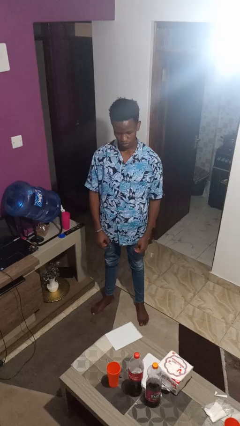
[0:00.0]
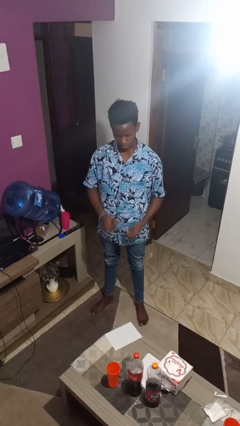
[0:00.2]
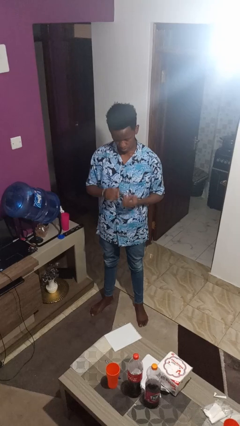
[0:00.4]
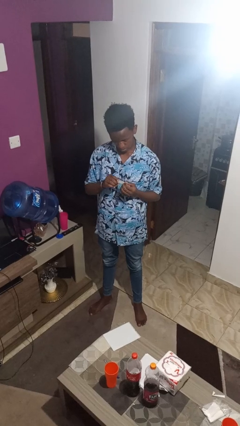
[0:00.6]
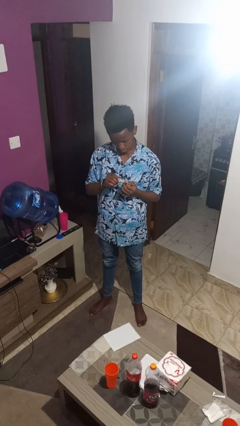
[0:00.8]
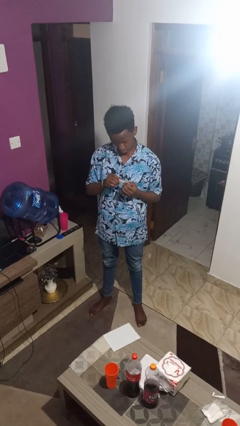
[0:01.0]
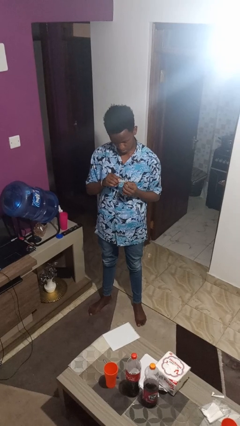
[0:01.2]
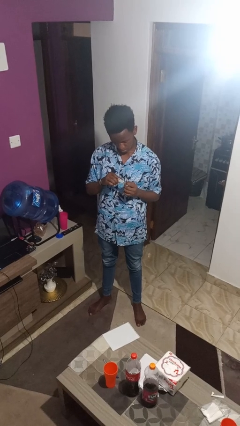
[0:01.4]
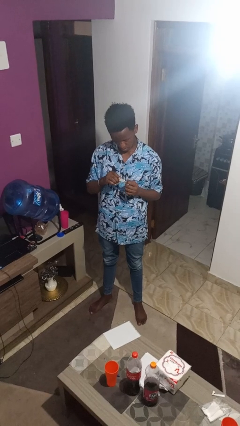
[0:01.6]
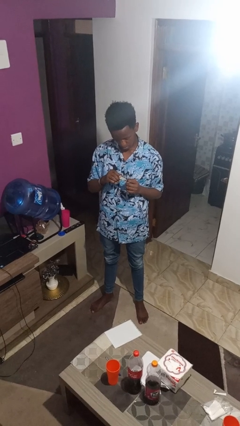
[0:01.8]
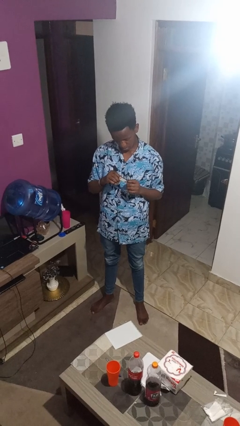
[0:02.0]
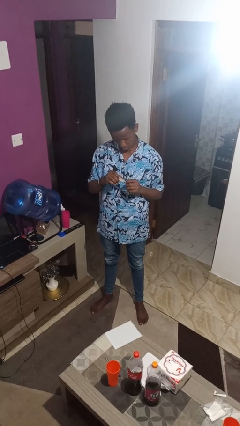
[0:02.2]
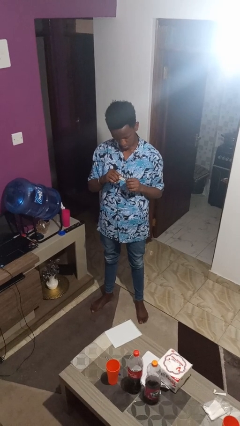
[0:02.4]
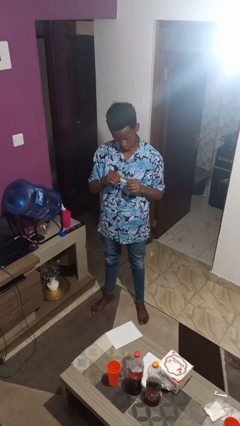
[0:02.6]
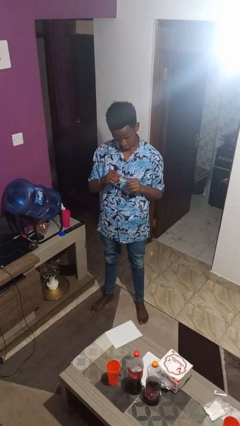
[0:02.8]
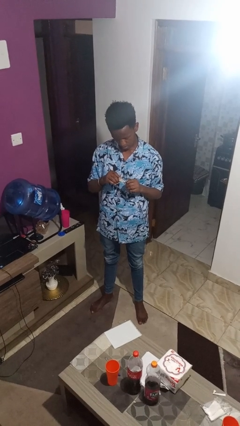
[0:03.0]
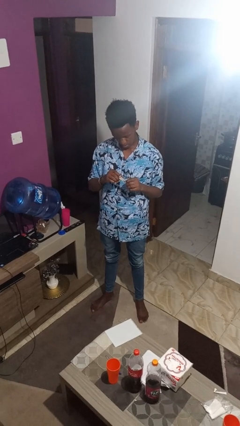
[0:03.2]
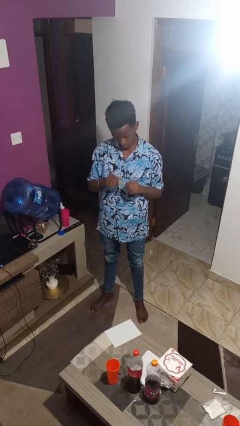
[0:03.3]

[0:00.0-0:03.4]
person clips fingernails

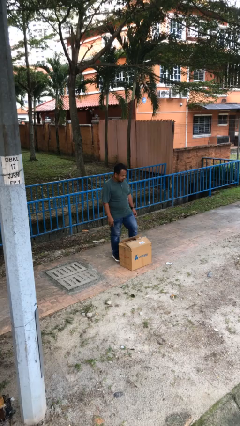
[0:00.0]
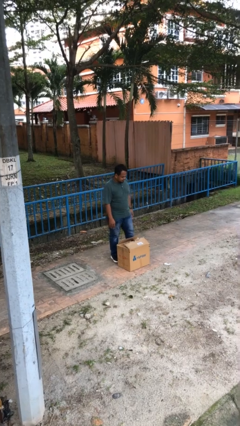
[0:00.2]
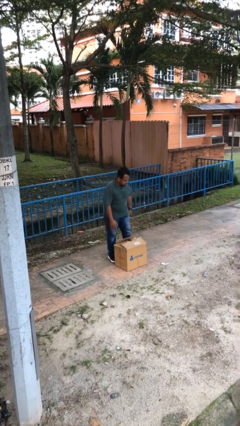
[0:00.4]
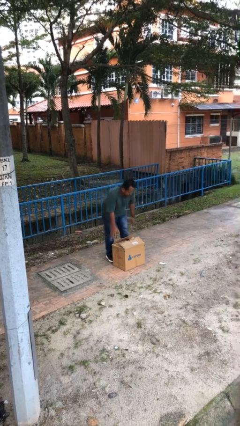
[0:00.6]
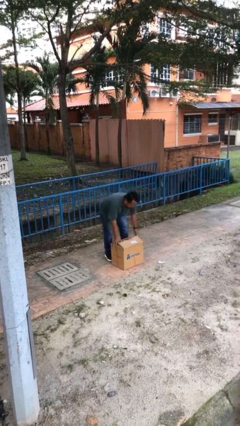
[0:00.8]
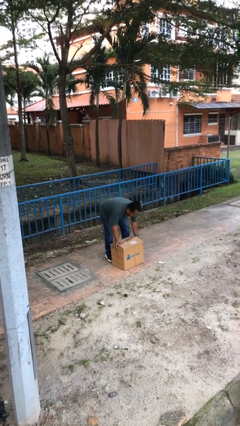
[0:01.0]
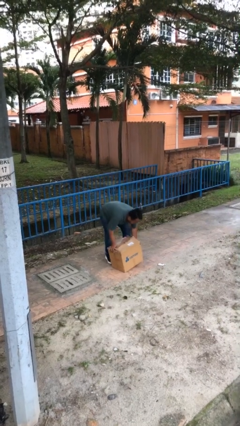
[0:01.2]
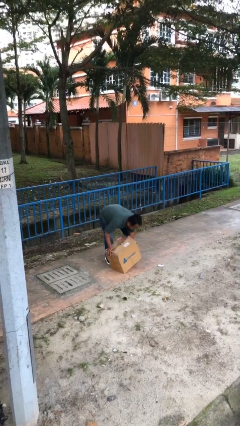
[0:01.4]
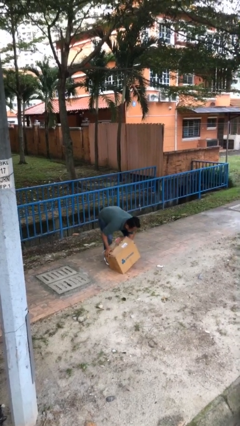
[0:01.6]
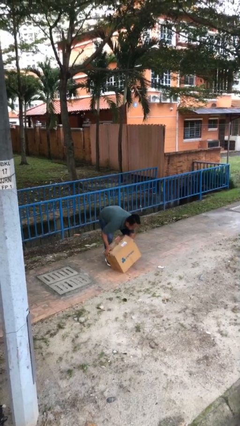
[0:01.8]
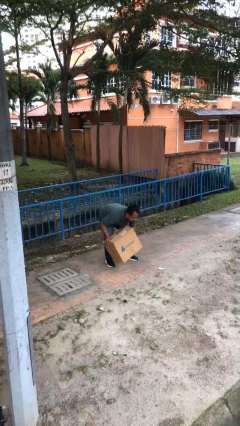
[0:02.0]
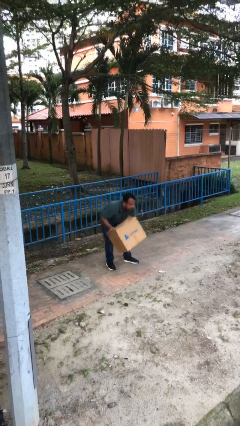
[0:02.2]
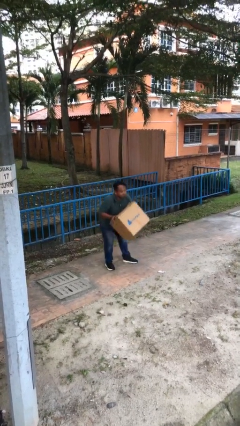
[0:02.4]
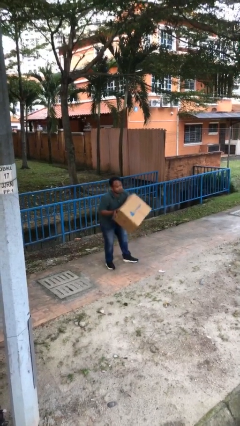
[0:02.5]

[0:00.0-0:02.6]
person picks up object from floor

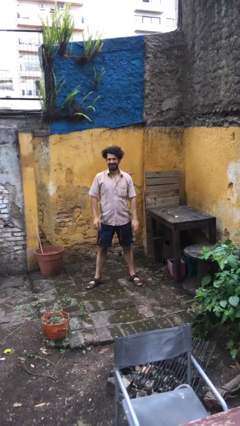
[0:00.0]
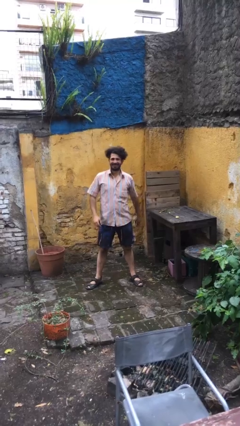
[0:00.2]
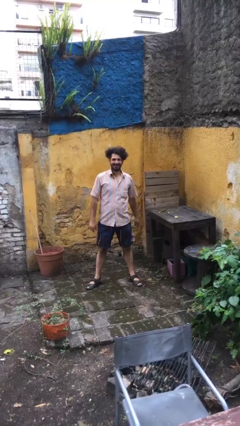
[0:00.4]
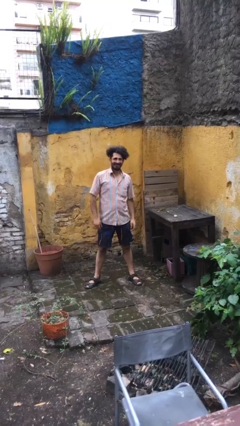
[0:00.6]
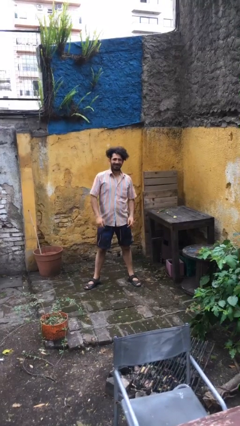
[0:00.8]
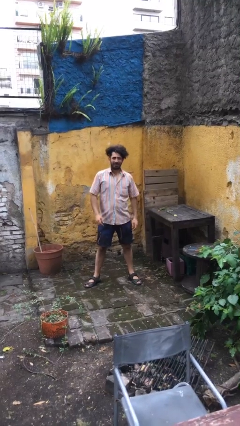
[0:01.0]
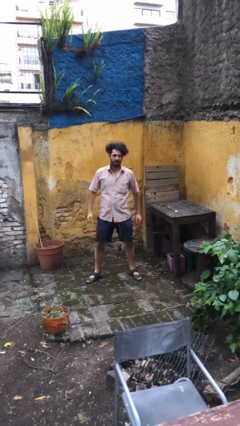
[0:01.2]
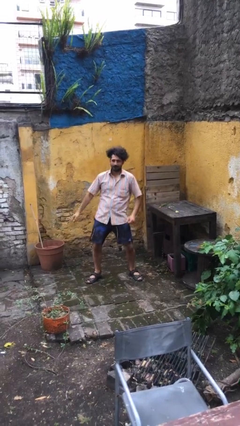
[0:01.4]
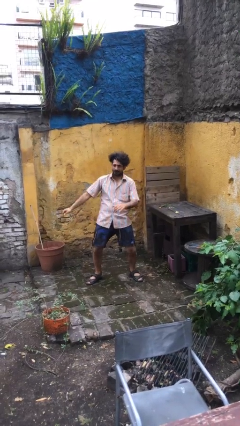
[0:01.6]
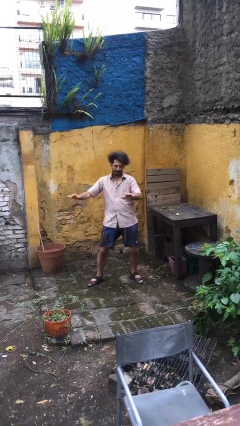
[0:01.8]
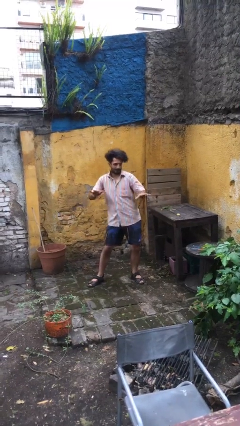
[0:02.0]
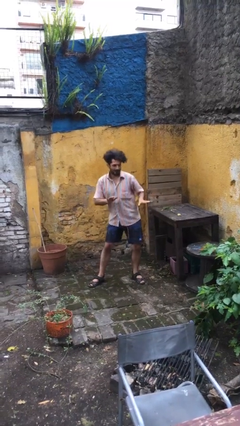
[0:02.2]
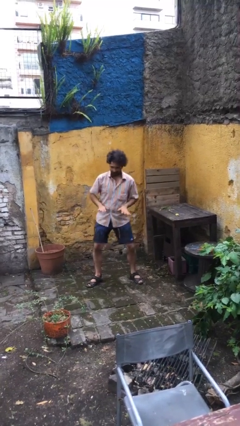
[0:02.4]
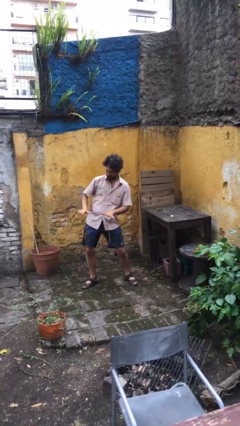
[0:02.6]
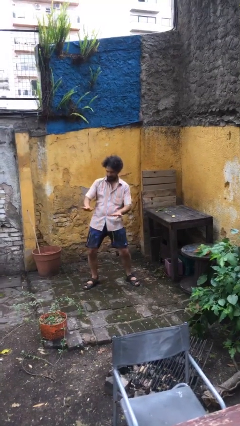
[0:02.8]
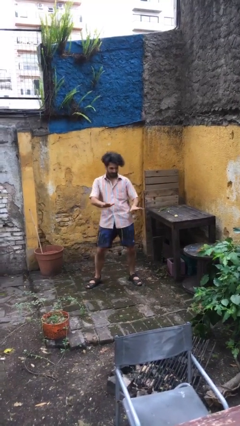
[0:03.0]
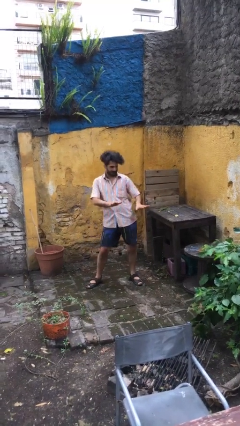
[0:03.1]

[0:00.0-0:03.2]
person dances in place

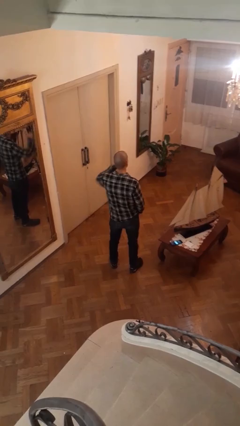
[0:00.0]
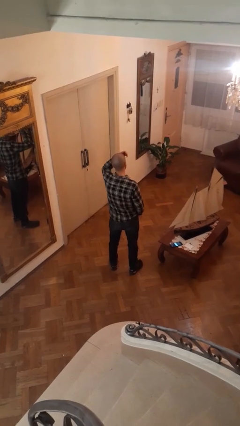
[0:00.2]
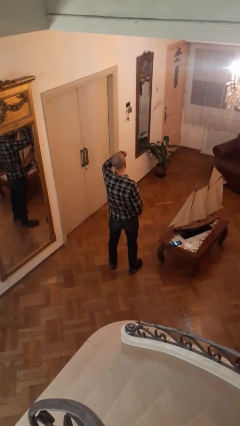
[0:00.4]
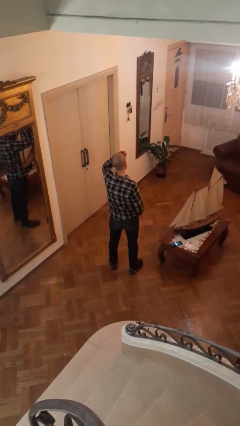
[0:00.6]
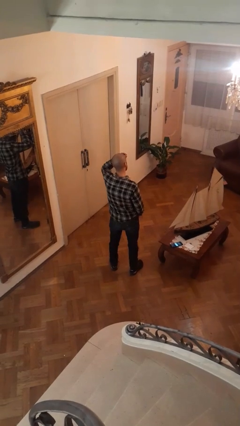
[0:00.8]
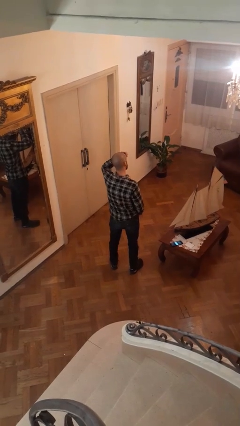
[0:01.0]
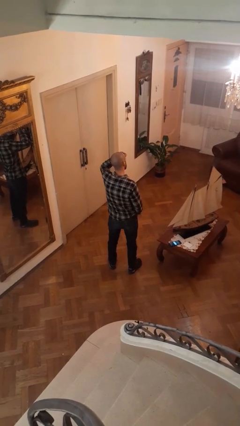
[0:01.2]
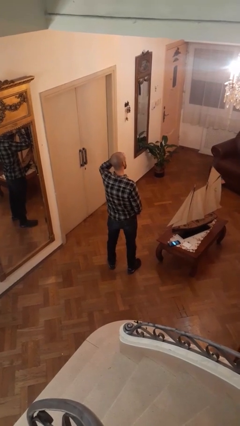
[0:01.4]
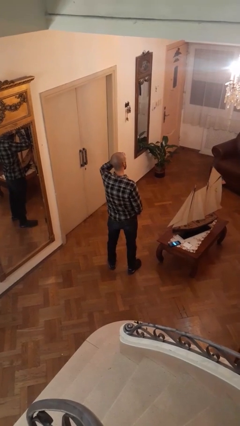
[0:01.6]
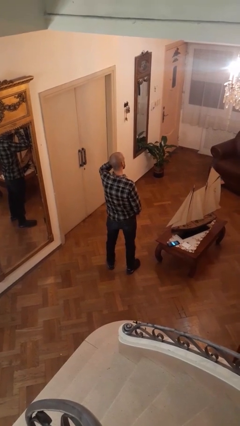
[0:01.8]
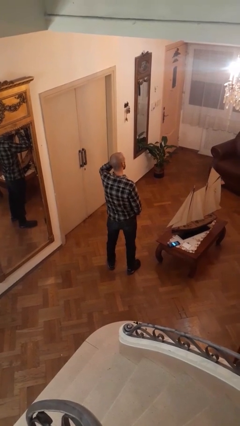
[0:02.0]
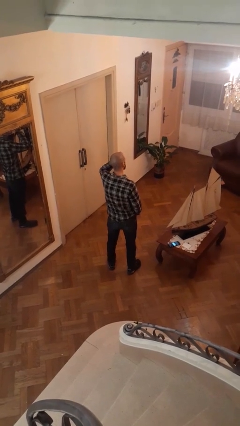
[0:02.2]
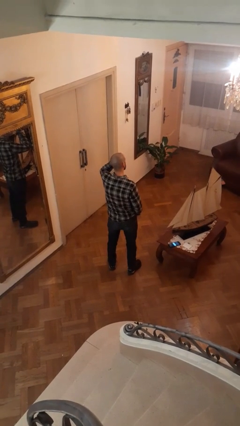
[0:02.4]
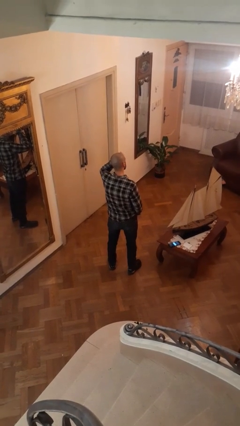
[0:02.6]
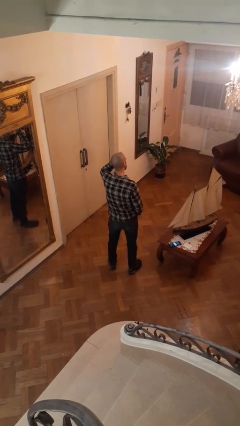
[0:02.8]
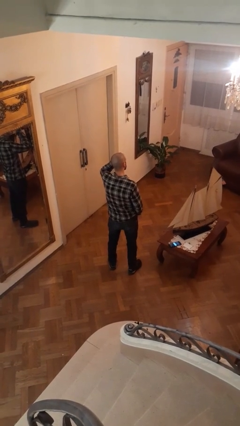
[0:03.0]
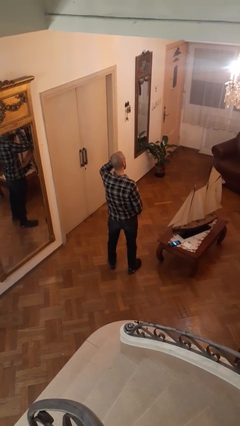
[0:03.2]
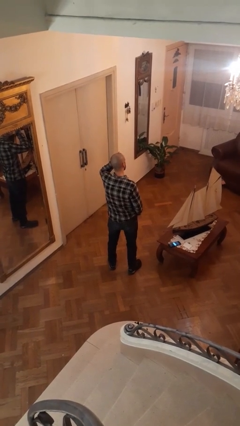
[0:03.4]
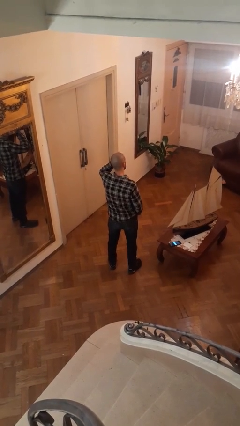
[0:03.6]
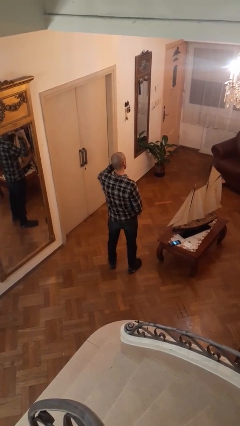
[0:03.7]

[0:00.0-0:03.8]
person scratches face

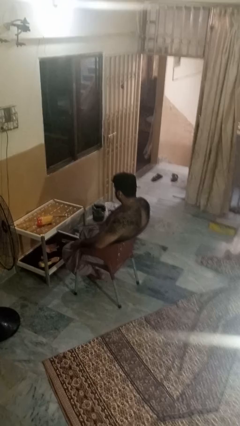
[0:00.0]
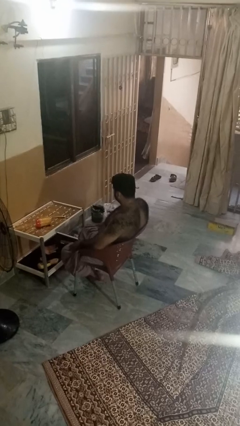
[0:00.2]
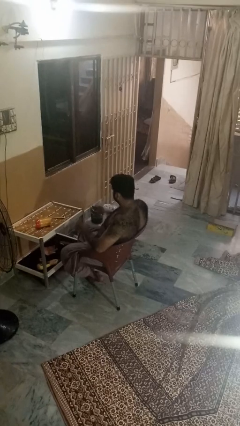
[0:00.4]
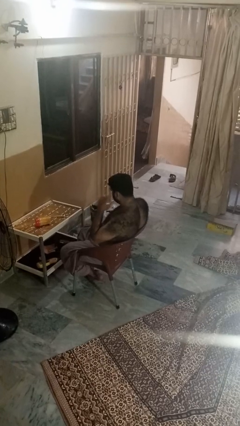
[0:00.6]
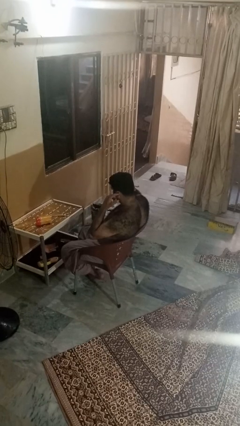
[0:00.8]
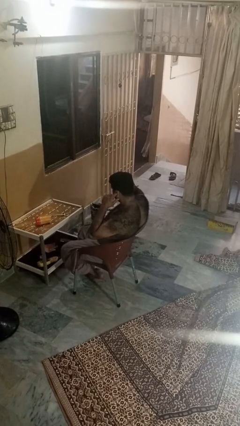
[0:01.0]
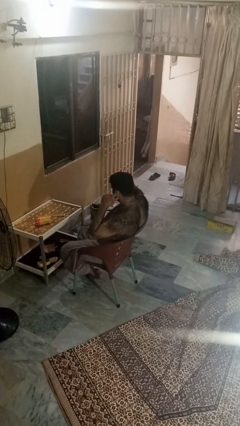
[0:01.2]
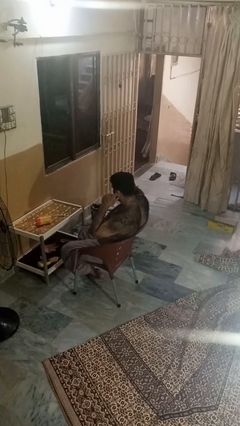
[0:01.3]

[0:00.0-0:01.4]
person puts fingers in ear

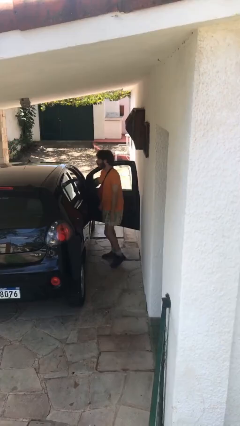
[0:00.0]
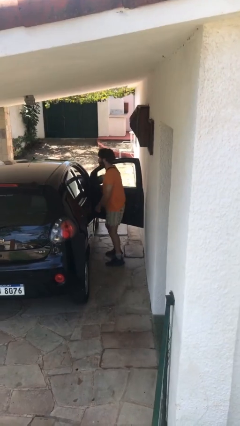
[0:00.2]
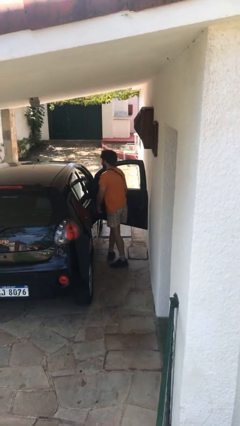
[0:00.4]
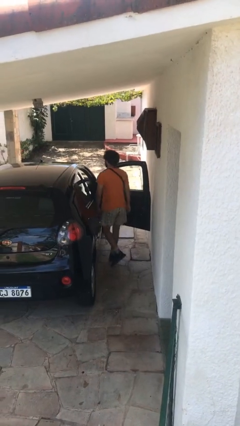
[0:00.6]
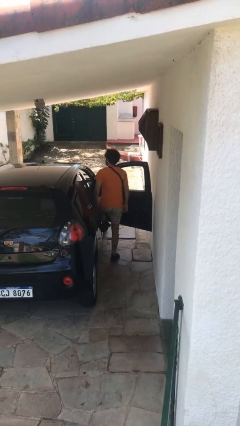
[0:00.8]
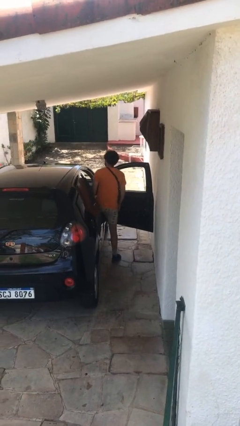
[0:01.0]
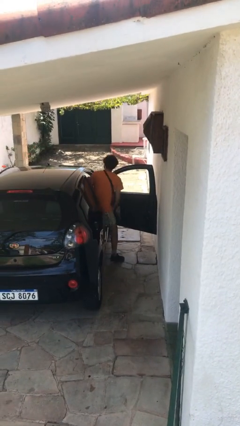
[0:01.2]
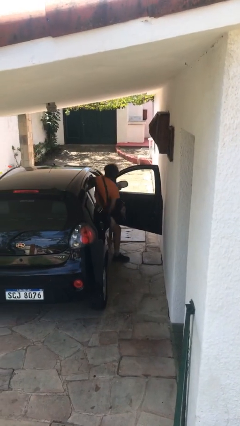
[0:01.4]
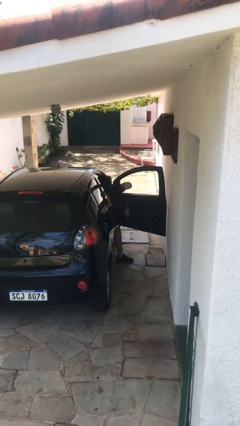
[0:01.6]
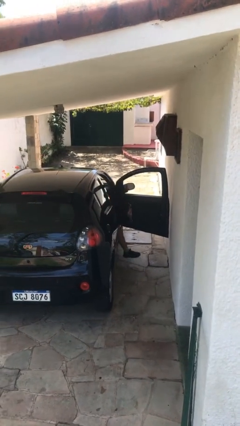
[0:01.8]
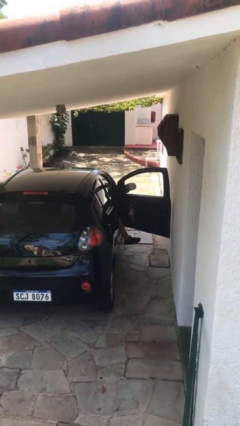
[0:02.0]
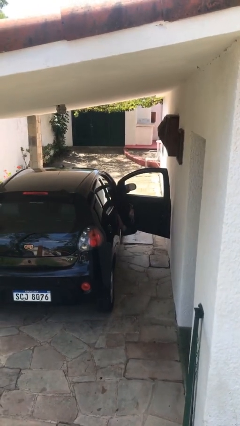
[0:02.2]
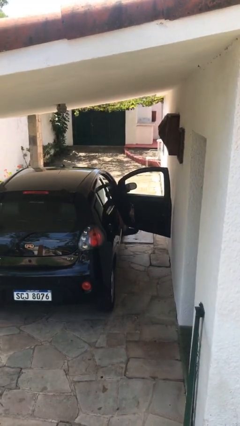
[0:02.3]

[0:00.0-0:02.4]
person enters car

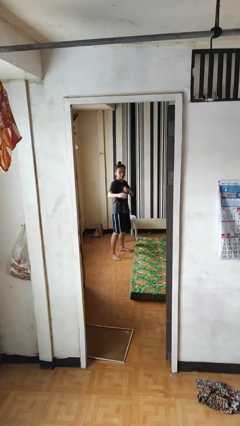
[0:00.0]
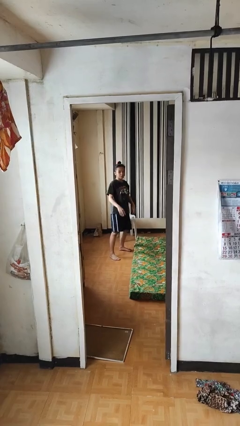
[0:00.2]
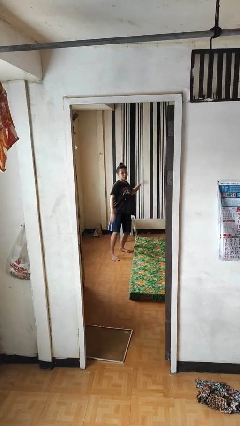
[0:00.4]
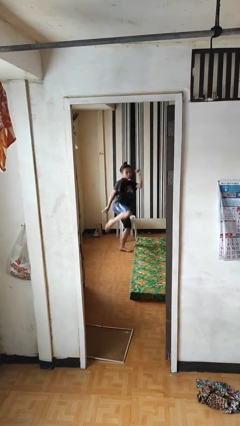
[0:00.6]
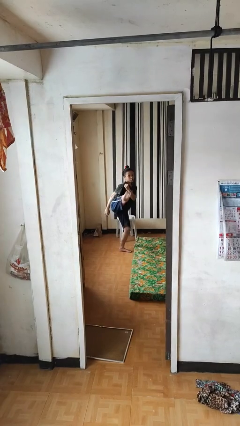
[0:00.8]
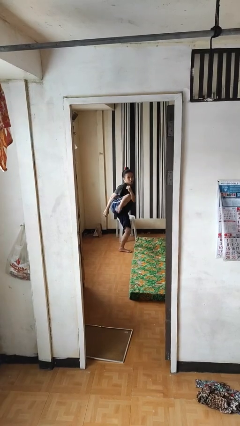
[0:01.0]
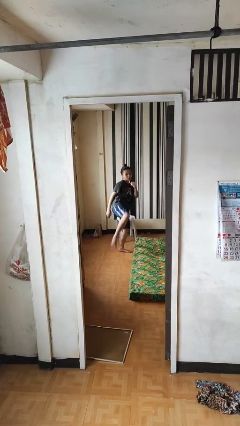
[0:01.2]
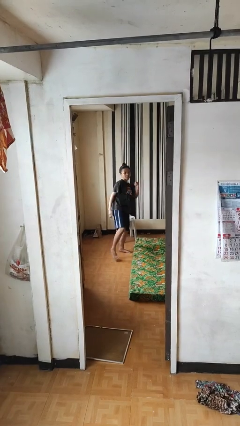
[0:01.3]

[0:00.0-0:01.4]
person karate kicks
